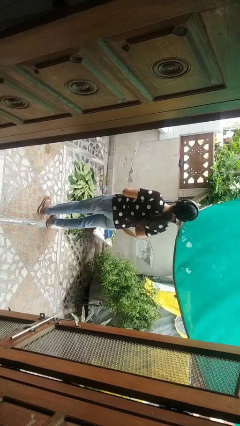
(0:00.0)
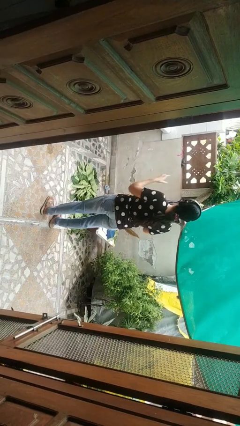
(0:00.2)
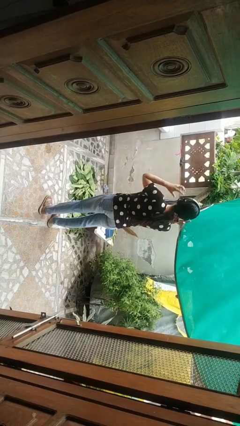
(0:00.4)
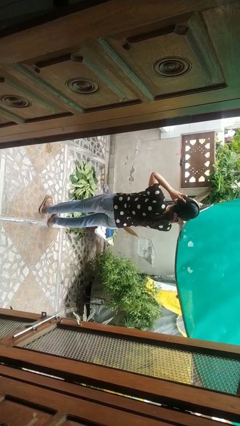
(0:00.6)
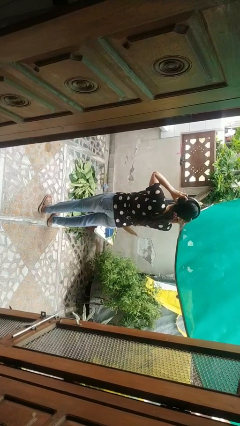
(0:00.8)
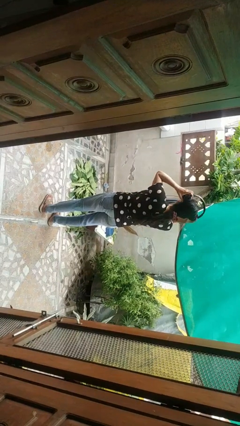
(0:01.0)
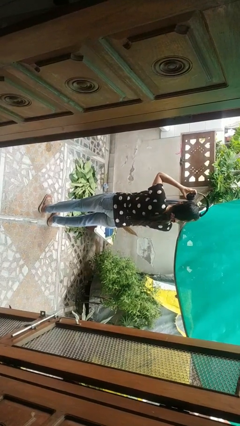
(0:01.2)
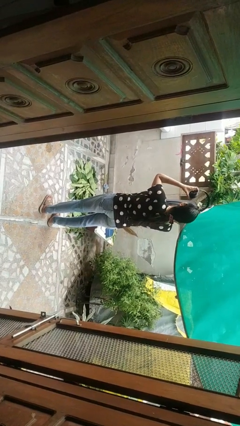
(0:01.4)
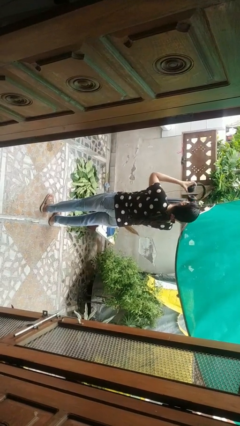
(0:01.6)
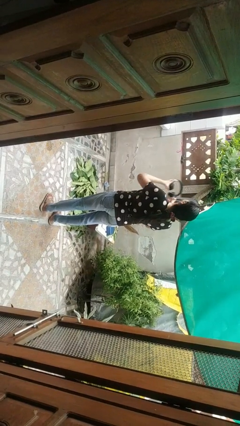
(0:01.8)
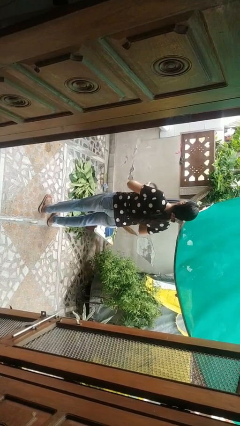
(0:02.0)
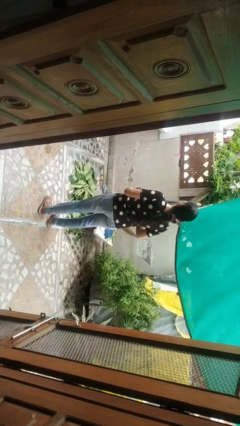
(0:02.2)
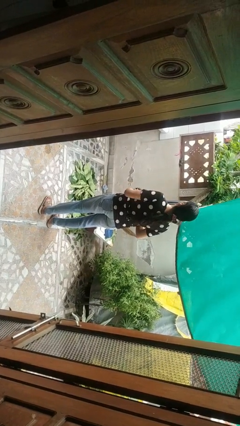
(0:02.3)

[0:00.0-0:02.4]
person takes off headphones

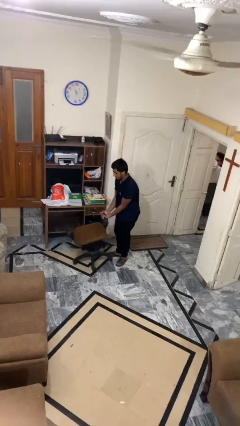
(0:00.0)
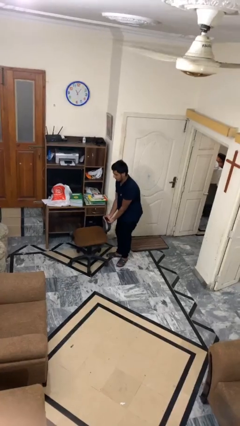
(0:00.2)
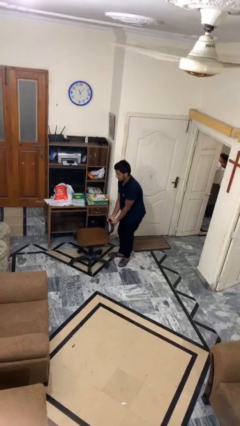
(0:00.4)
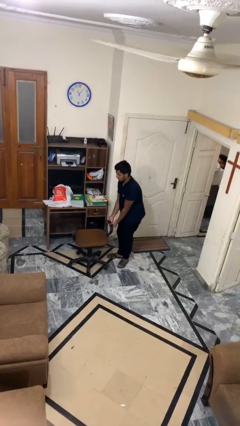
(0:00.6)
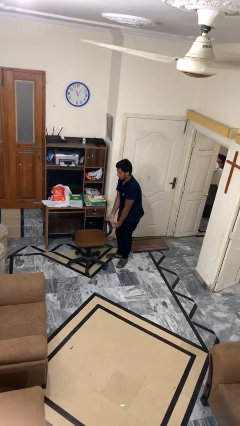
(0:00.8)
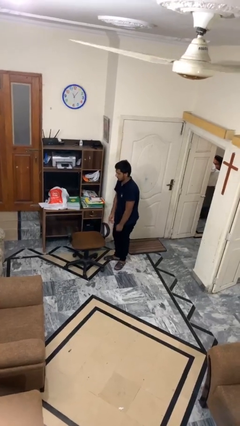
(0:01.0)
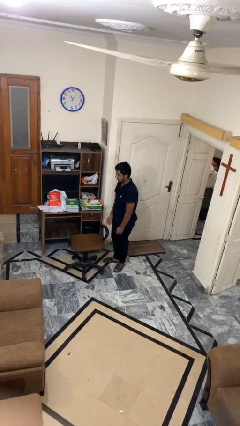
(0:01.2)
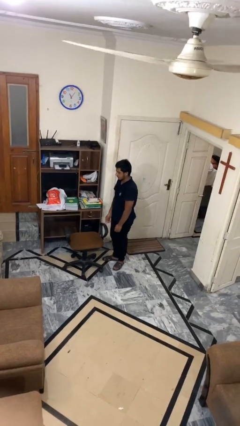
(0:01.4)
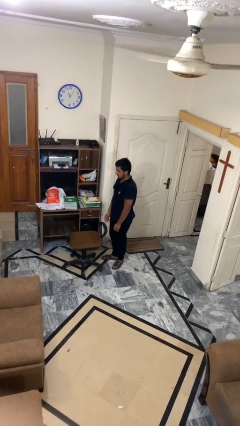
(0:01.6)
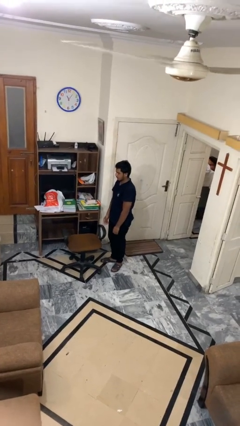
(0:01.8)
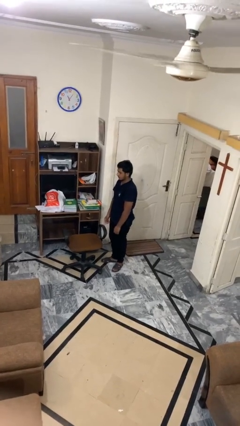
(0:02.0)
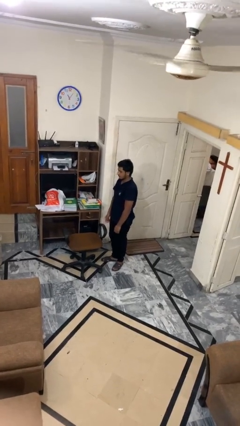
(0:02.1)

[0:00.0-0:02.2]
person puts down object on floor

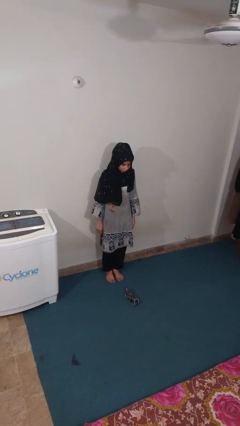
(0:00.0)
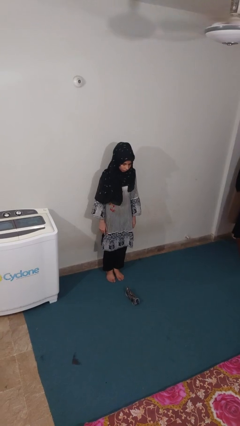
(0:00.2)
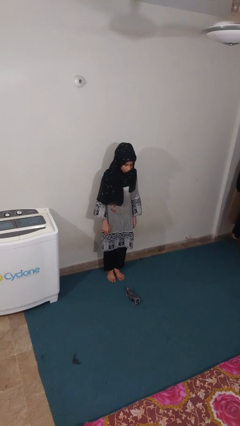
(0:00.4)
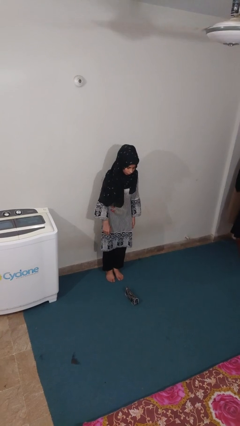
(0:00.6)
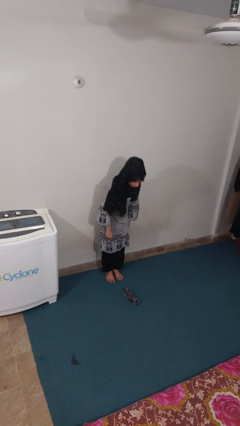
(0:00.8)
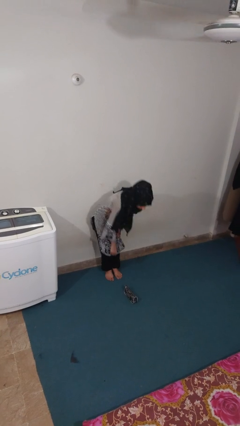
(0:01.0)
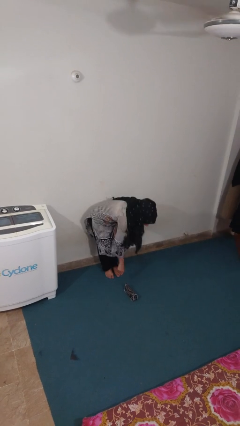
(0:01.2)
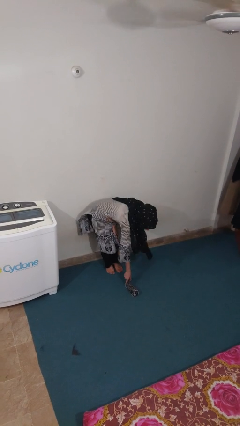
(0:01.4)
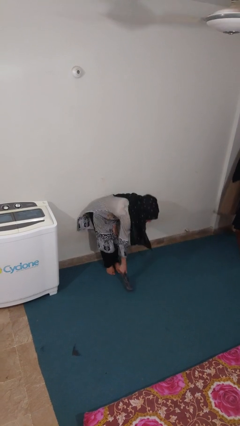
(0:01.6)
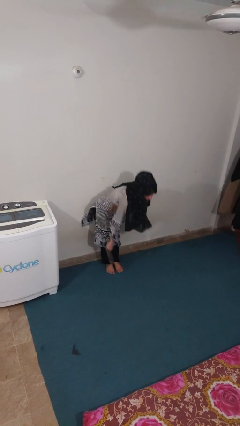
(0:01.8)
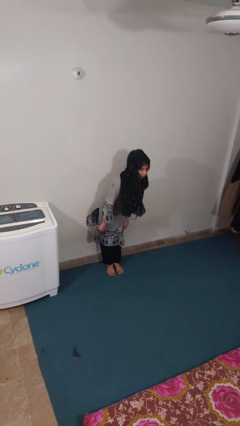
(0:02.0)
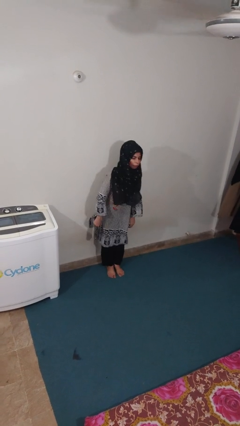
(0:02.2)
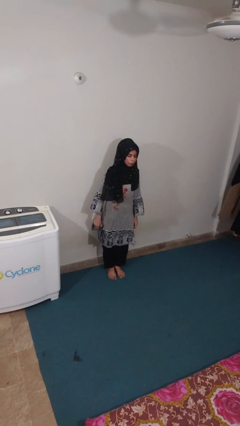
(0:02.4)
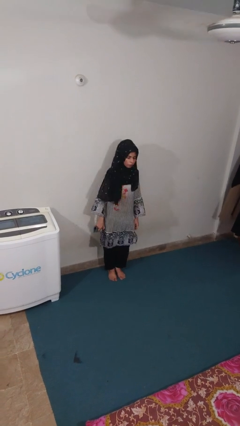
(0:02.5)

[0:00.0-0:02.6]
person picks up object from floor

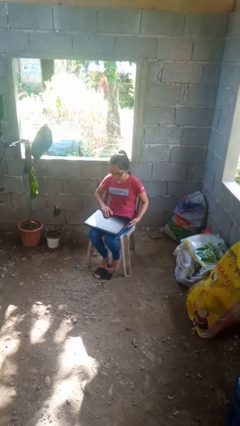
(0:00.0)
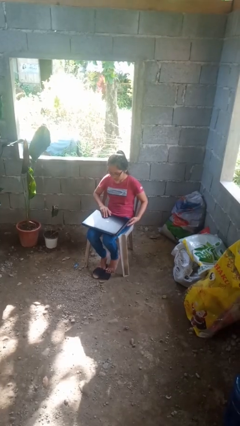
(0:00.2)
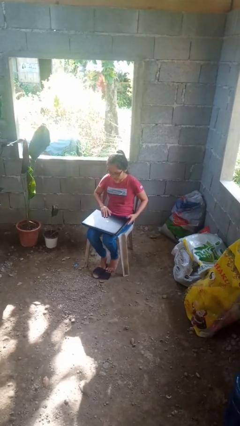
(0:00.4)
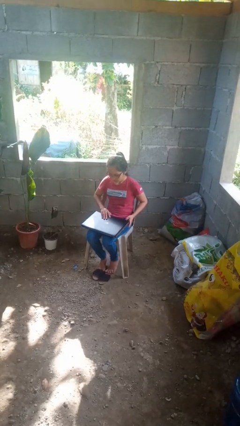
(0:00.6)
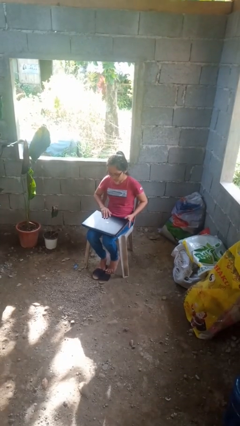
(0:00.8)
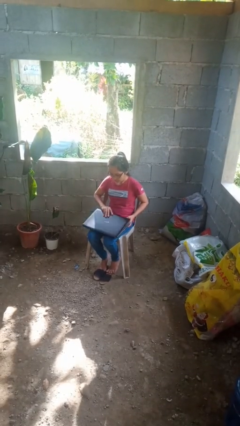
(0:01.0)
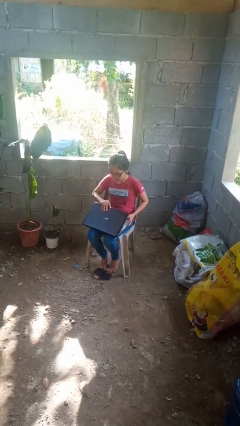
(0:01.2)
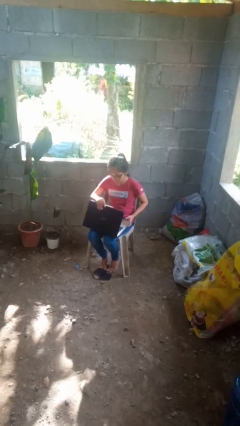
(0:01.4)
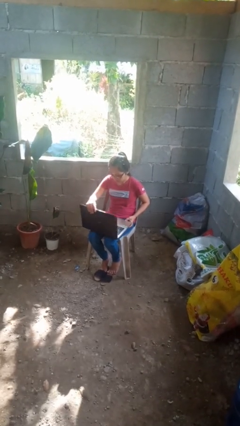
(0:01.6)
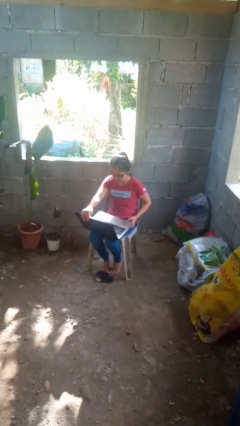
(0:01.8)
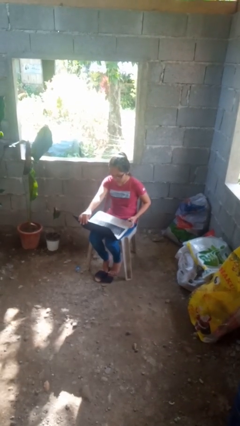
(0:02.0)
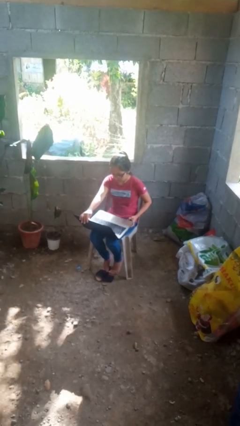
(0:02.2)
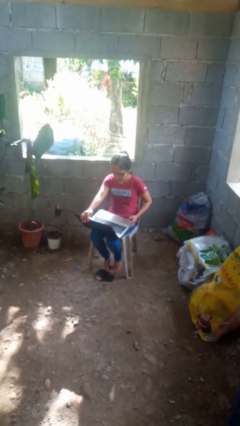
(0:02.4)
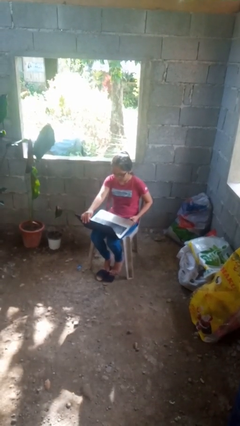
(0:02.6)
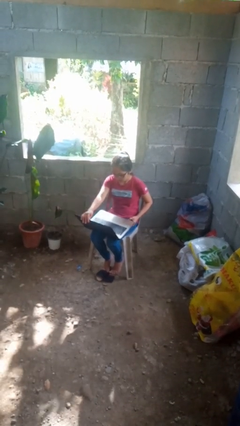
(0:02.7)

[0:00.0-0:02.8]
person opens laptop

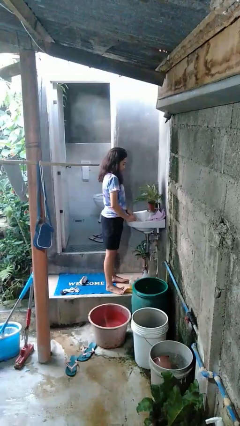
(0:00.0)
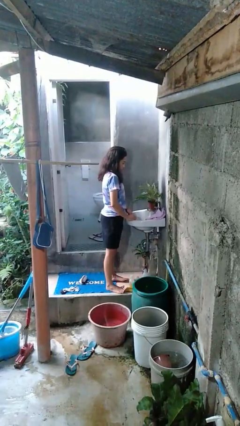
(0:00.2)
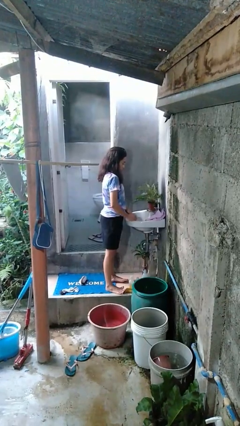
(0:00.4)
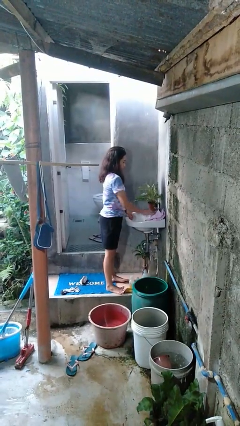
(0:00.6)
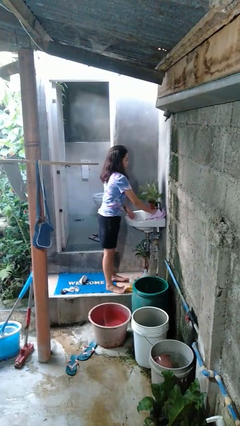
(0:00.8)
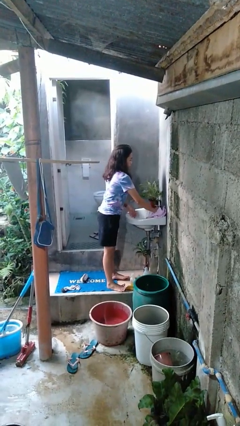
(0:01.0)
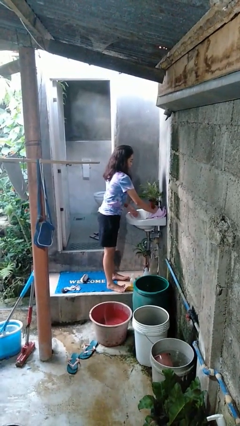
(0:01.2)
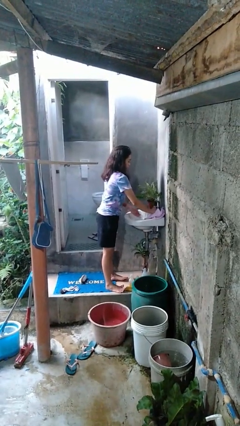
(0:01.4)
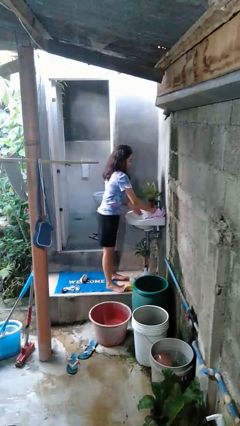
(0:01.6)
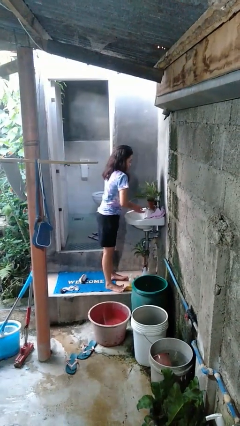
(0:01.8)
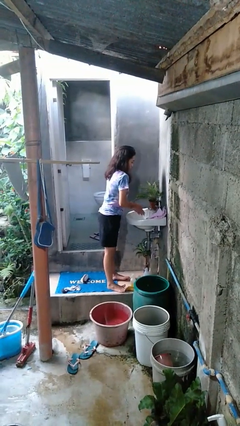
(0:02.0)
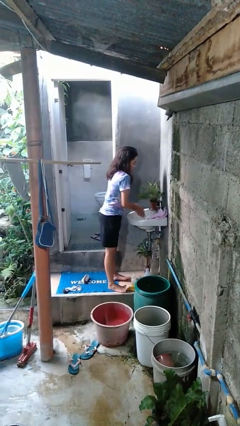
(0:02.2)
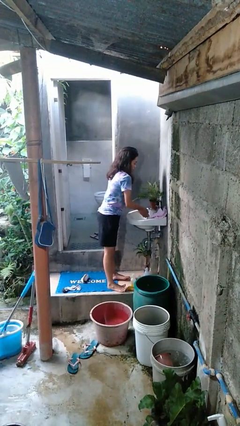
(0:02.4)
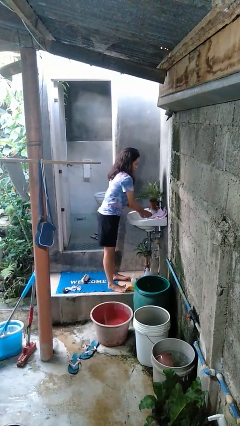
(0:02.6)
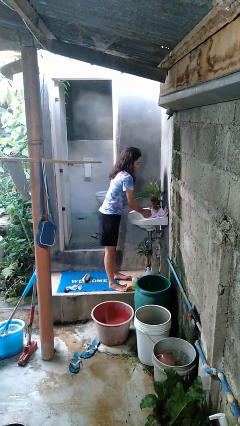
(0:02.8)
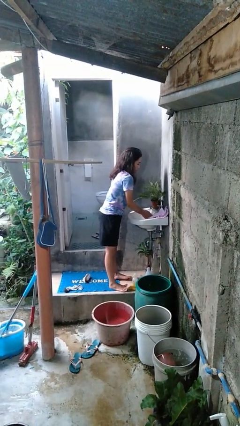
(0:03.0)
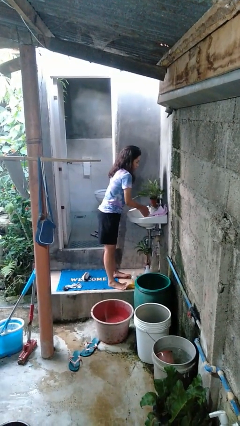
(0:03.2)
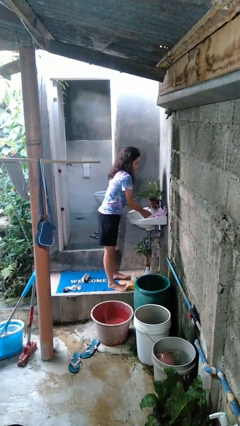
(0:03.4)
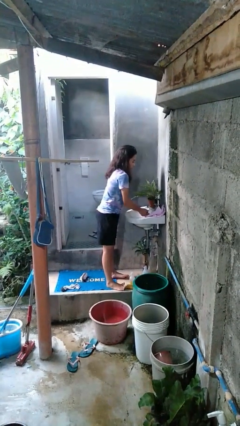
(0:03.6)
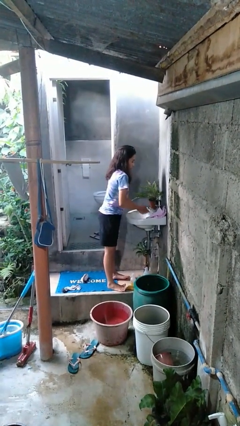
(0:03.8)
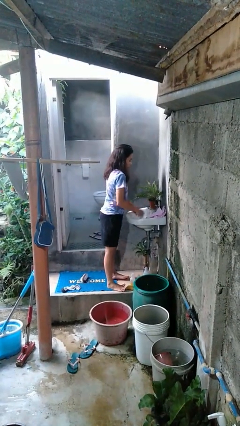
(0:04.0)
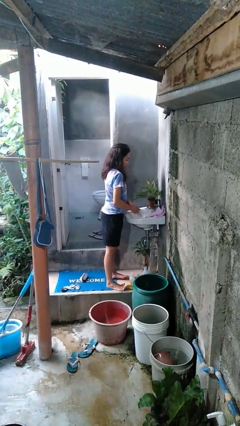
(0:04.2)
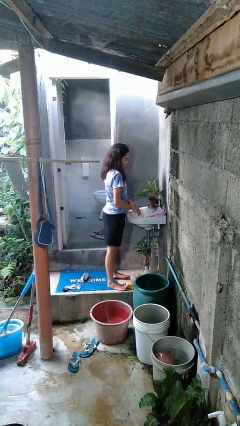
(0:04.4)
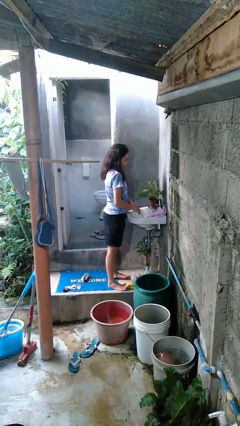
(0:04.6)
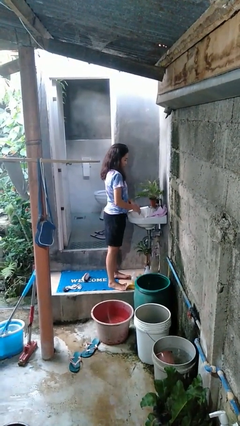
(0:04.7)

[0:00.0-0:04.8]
person washes hands

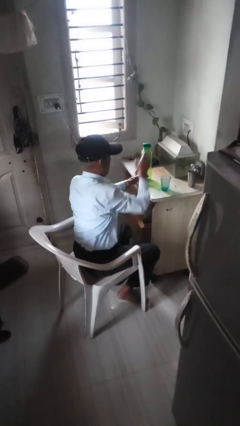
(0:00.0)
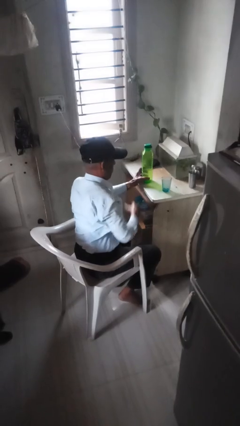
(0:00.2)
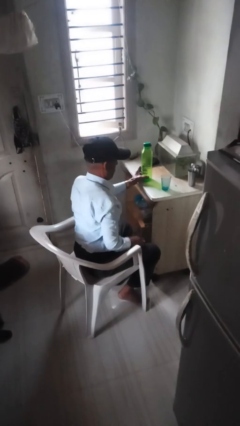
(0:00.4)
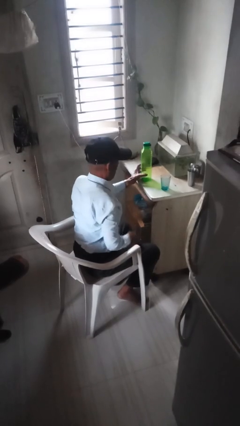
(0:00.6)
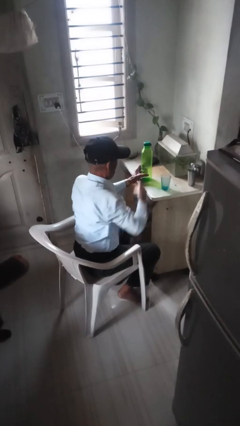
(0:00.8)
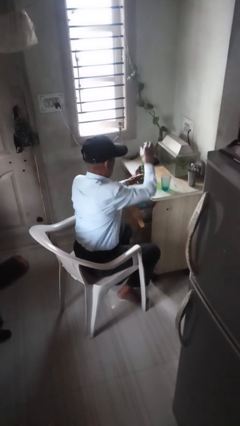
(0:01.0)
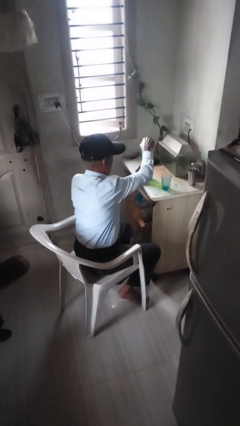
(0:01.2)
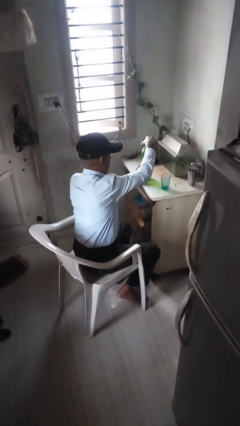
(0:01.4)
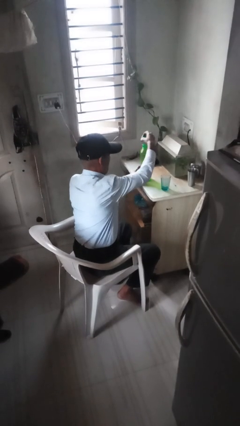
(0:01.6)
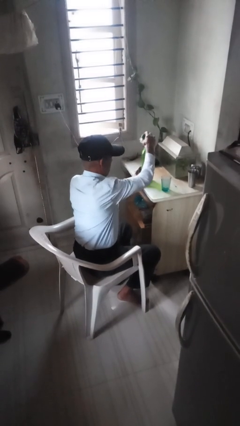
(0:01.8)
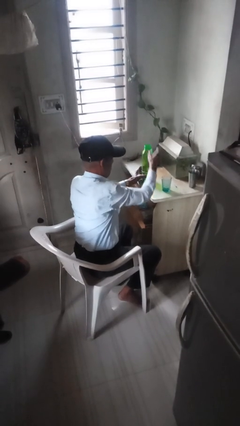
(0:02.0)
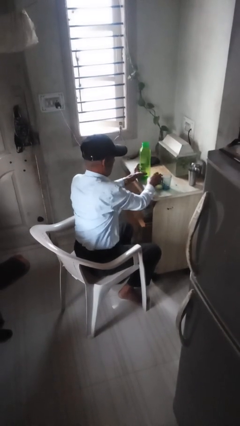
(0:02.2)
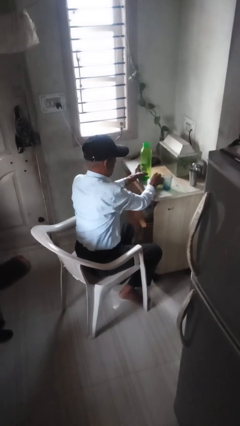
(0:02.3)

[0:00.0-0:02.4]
person unscrews lid from bottle

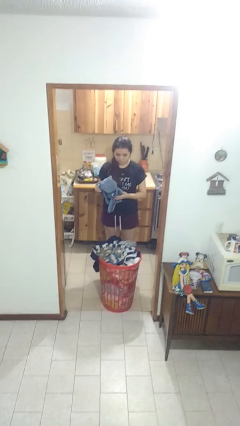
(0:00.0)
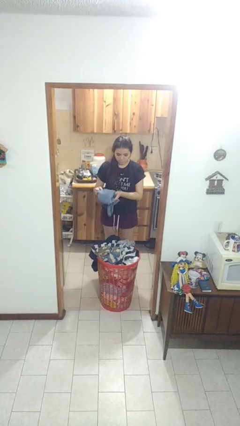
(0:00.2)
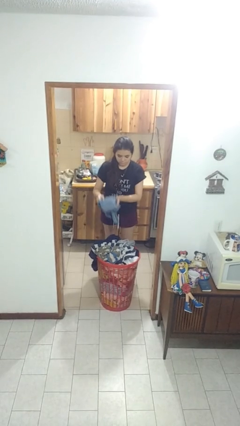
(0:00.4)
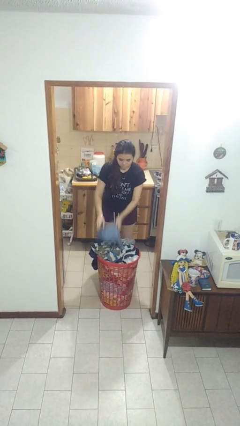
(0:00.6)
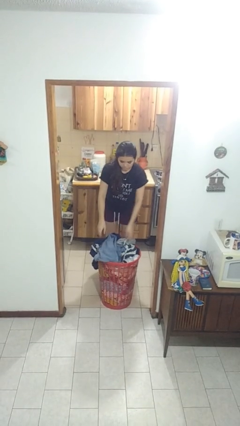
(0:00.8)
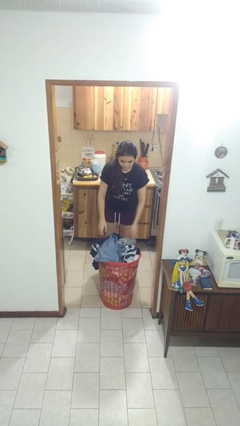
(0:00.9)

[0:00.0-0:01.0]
person puts object into basket
